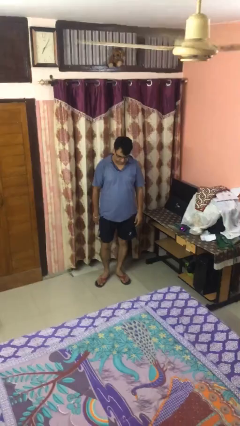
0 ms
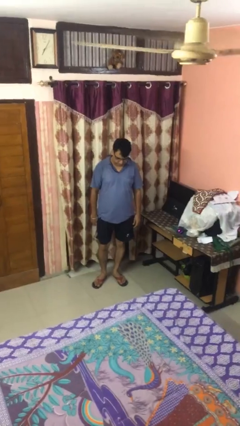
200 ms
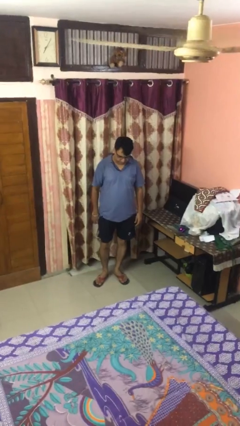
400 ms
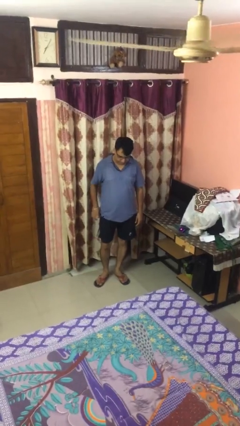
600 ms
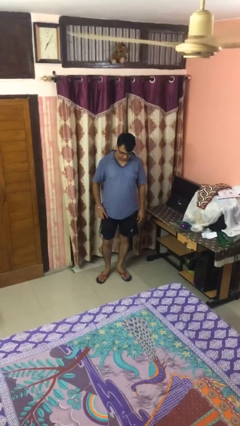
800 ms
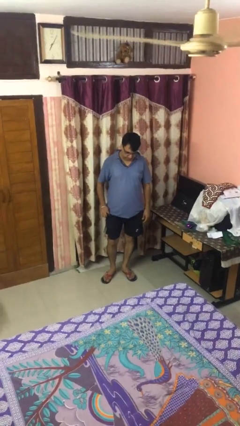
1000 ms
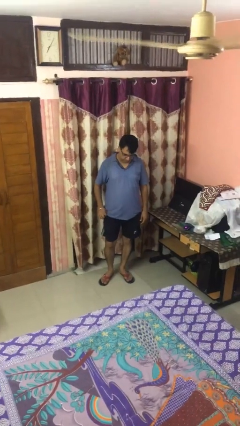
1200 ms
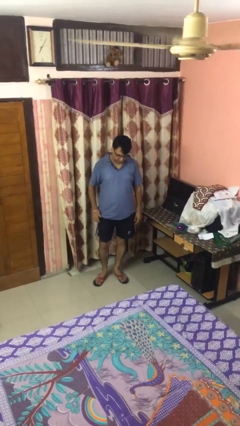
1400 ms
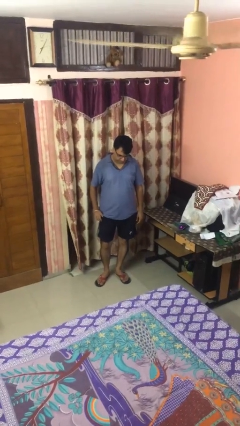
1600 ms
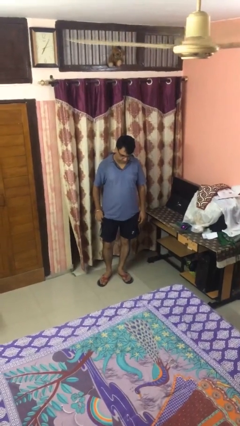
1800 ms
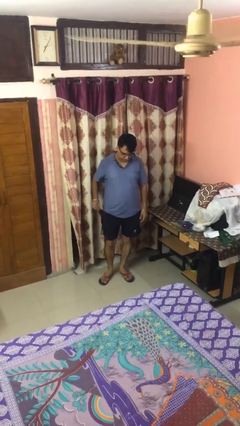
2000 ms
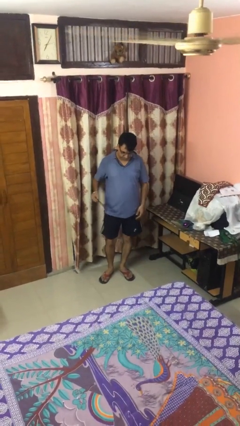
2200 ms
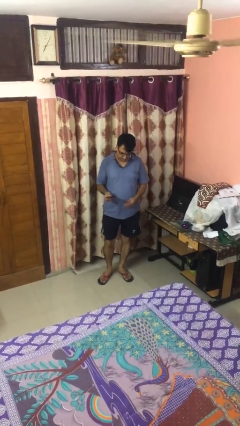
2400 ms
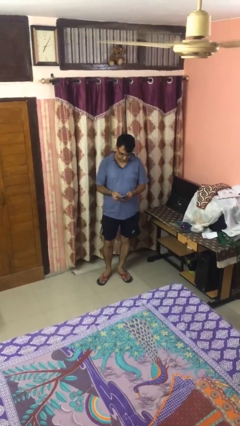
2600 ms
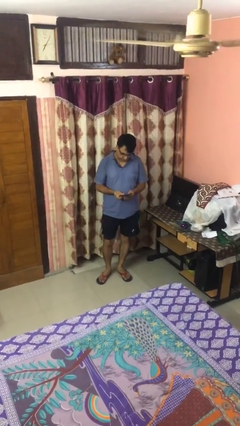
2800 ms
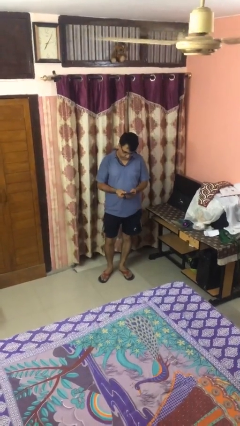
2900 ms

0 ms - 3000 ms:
person takes phone from pocket

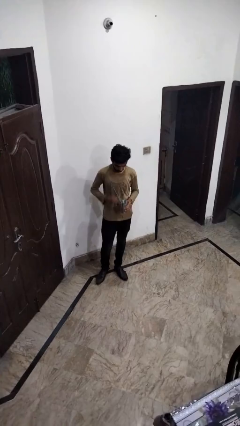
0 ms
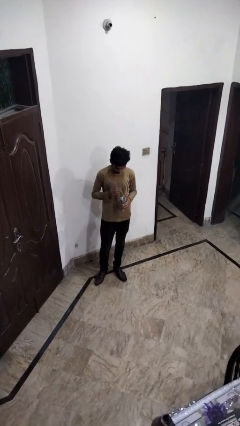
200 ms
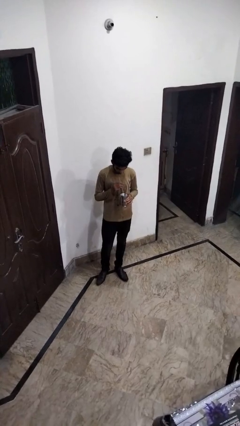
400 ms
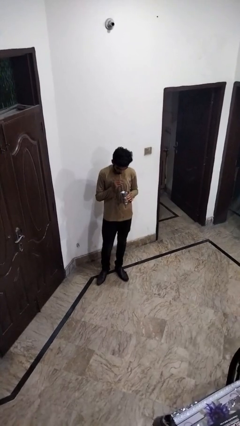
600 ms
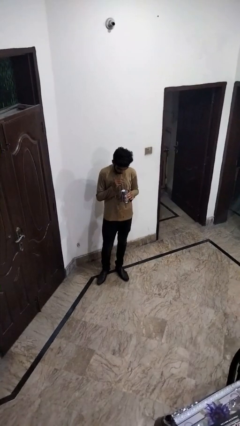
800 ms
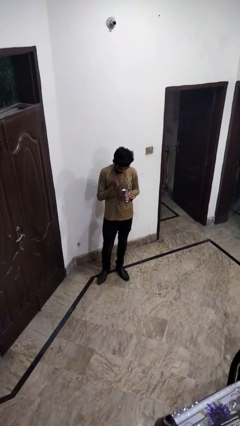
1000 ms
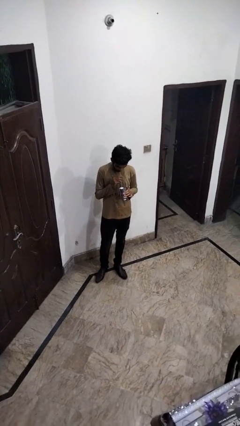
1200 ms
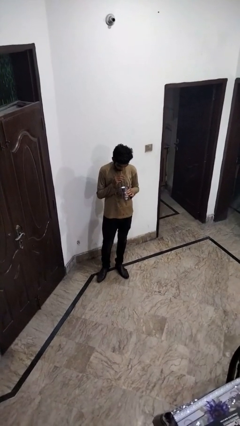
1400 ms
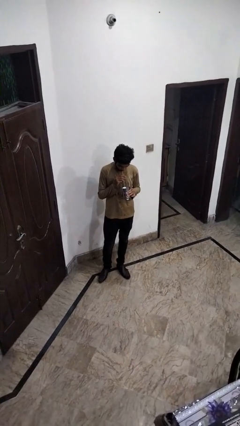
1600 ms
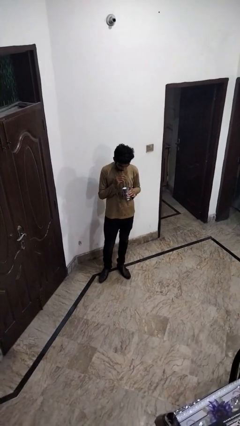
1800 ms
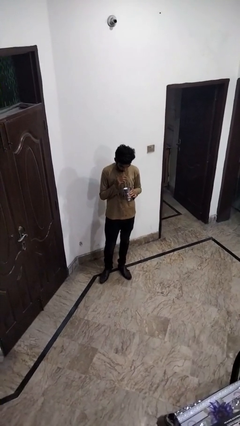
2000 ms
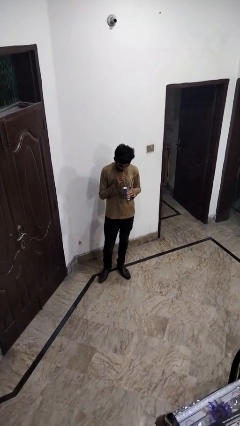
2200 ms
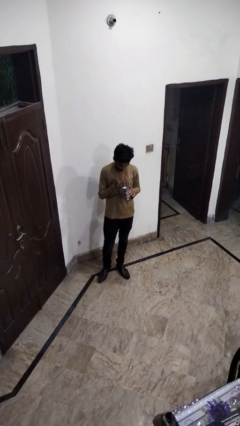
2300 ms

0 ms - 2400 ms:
person drinks from straw

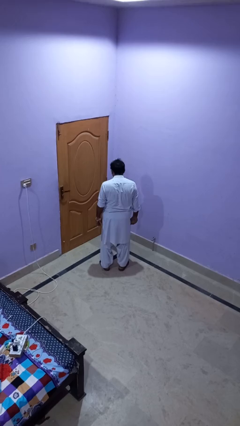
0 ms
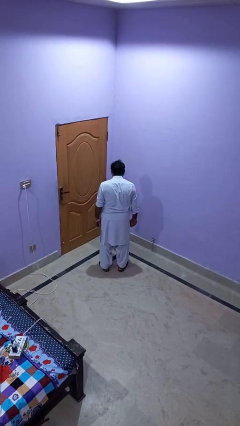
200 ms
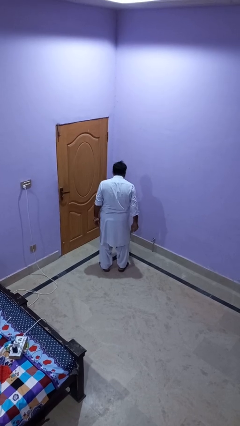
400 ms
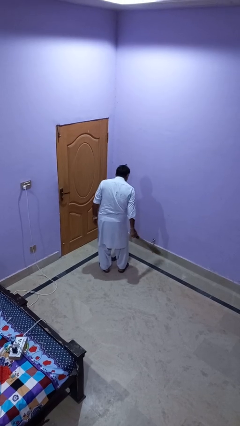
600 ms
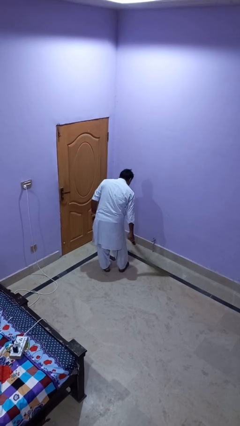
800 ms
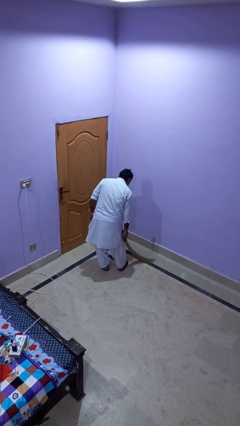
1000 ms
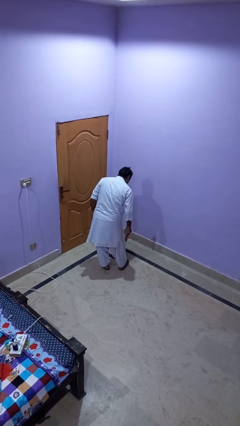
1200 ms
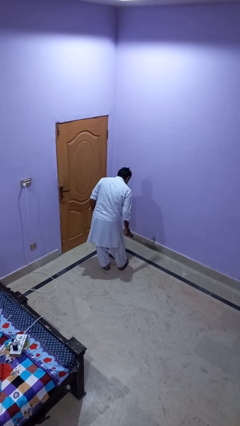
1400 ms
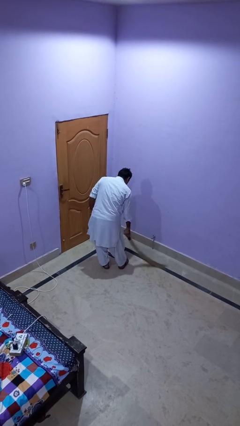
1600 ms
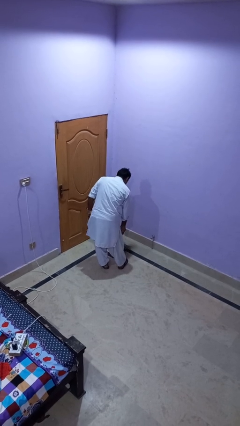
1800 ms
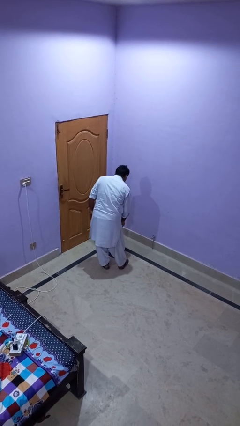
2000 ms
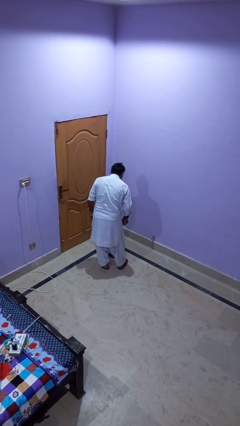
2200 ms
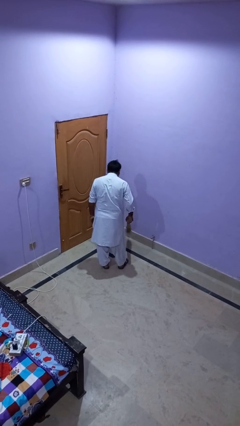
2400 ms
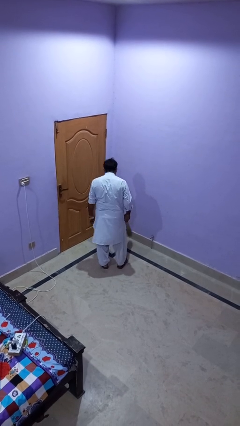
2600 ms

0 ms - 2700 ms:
person sweeps floor

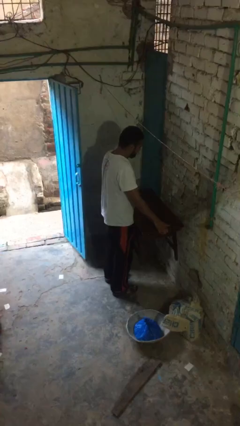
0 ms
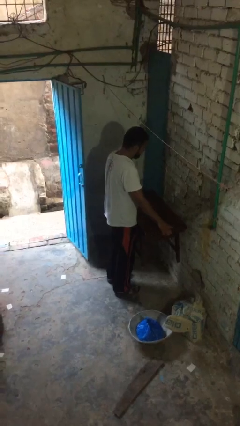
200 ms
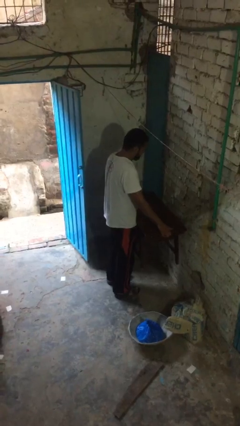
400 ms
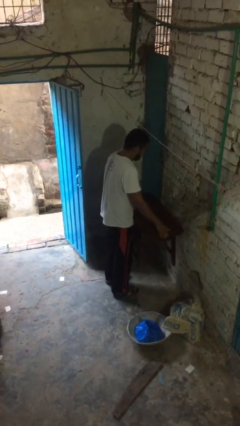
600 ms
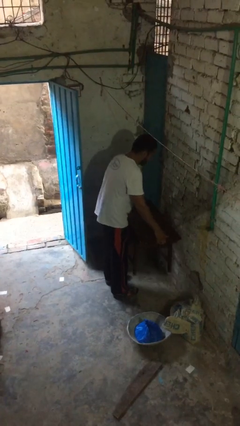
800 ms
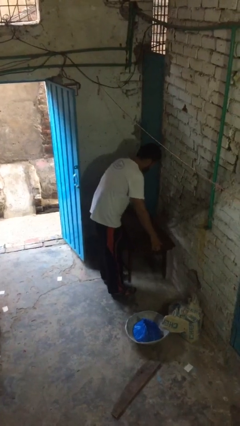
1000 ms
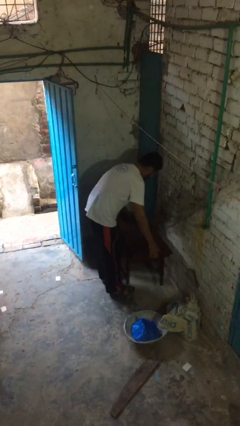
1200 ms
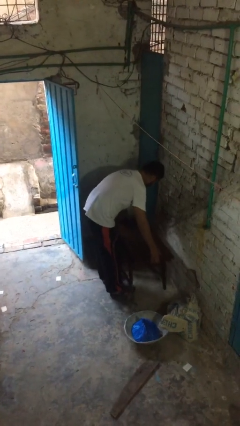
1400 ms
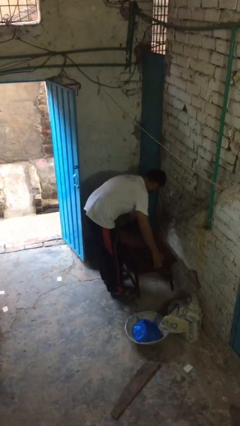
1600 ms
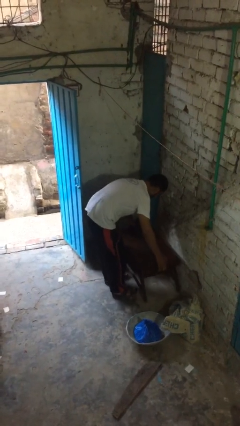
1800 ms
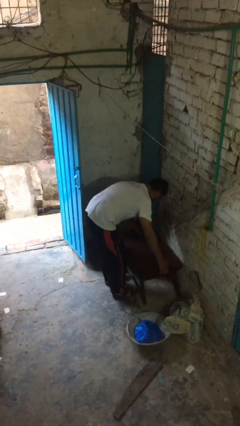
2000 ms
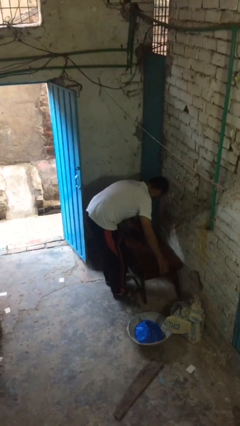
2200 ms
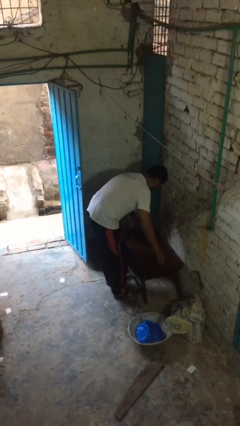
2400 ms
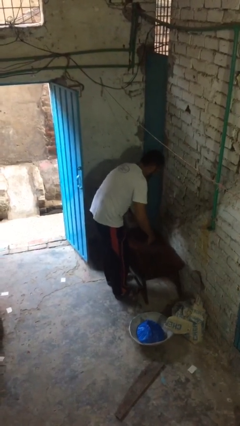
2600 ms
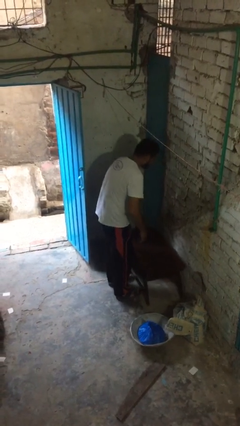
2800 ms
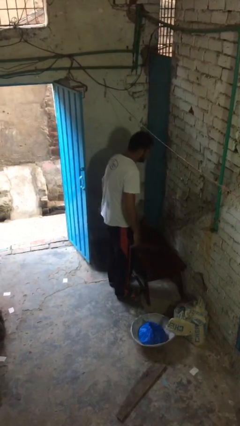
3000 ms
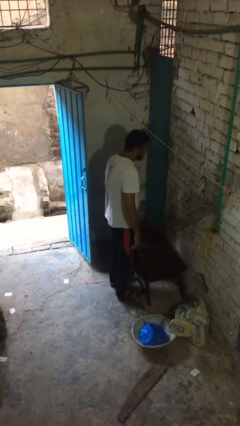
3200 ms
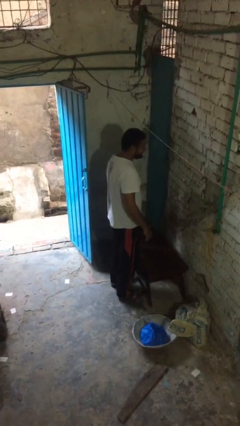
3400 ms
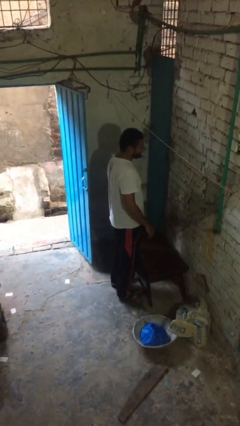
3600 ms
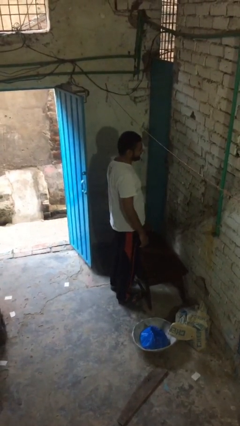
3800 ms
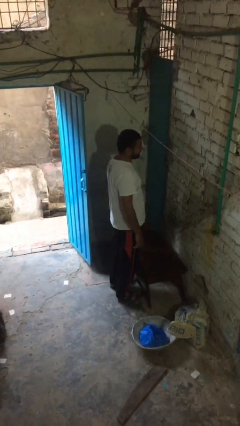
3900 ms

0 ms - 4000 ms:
person puts down object on floor

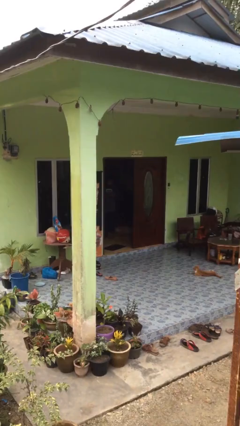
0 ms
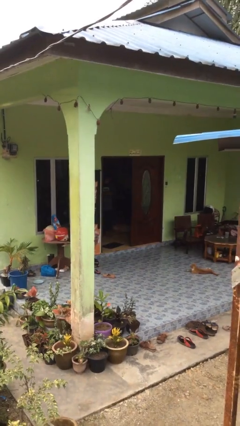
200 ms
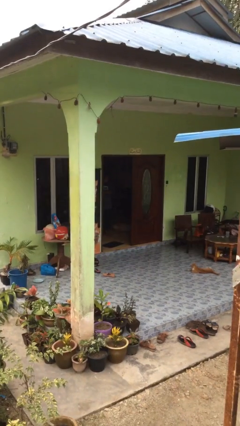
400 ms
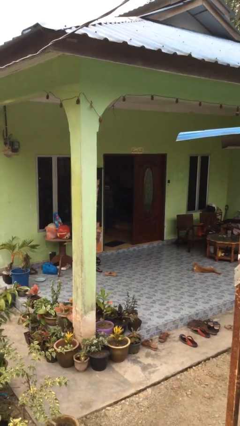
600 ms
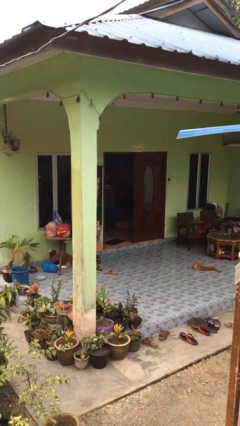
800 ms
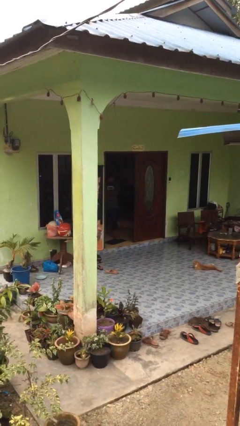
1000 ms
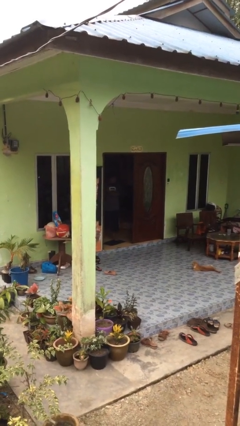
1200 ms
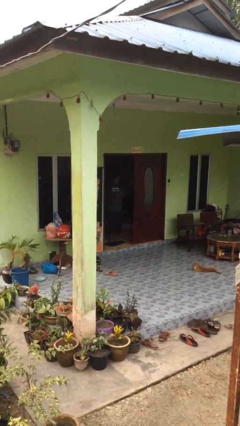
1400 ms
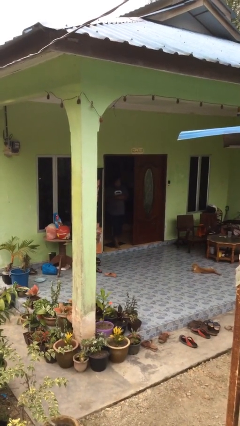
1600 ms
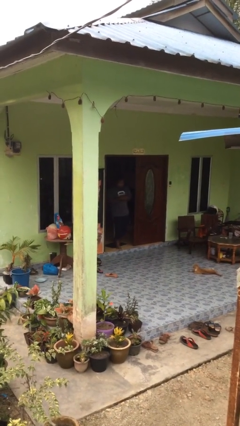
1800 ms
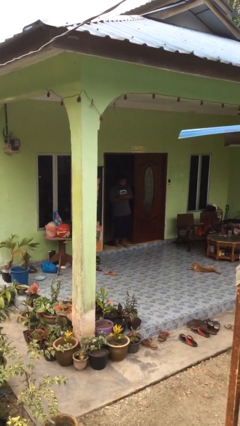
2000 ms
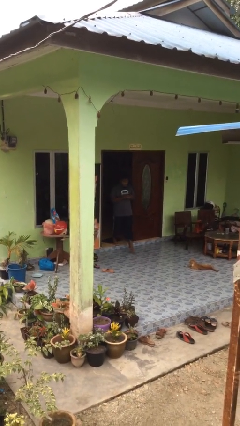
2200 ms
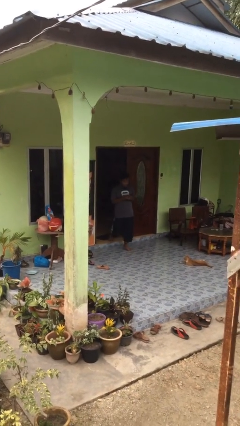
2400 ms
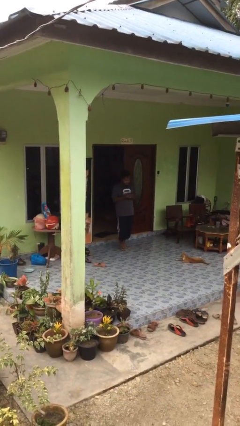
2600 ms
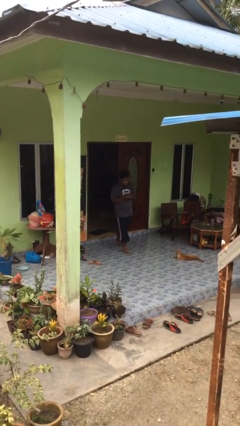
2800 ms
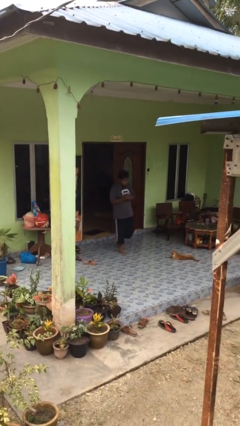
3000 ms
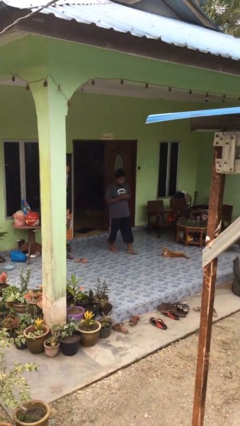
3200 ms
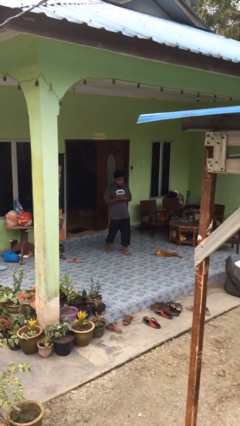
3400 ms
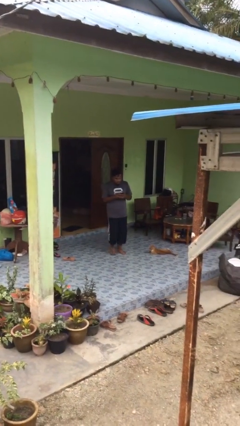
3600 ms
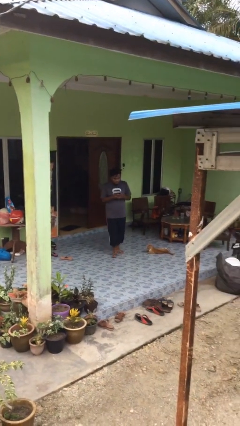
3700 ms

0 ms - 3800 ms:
person enters scene through structure

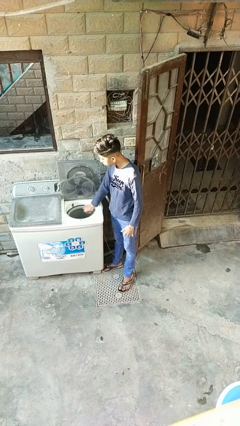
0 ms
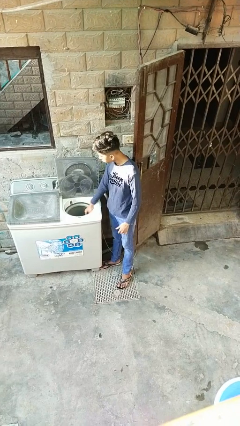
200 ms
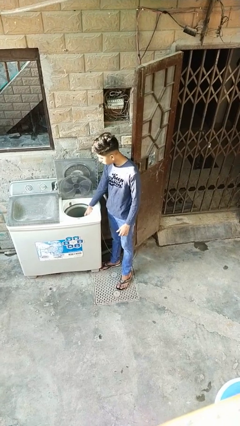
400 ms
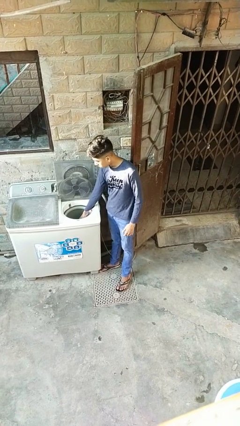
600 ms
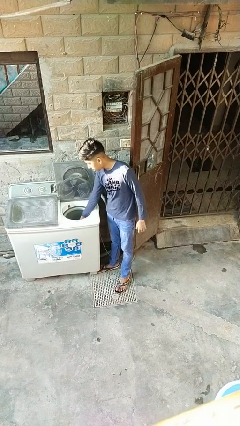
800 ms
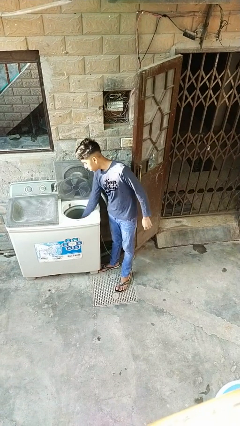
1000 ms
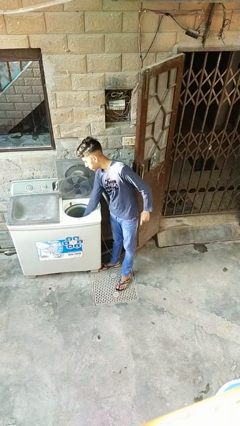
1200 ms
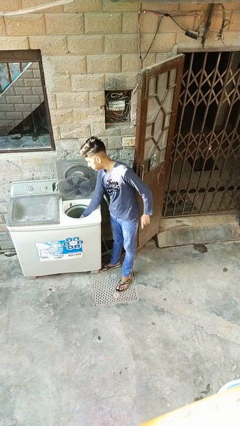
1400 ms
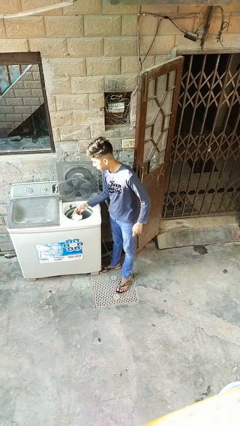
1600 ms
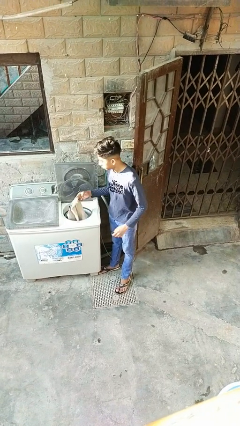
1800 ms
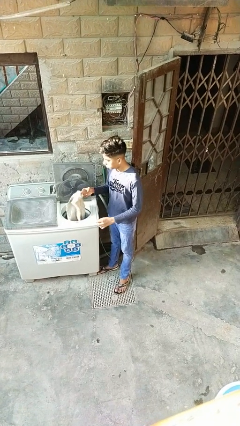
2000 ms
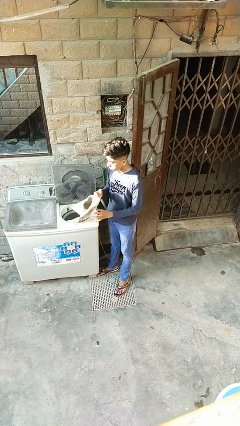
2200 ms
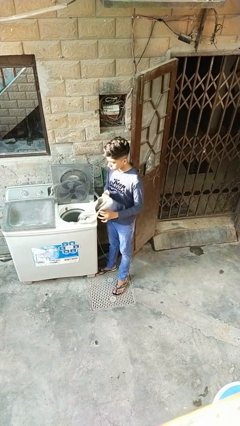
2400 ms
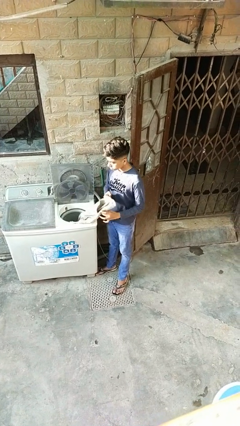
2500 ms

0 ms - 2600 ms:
person unloads dryer
